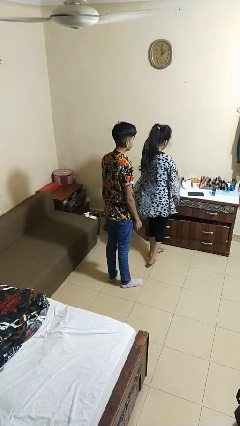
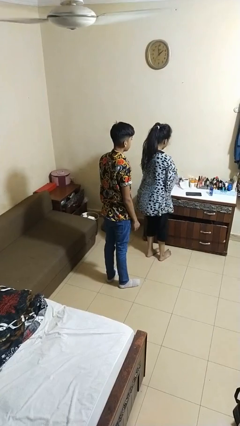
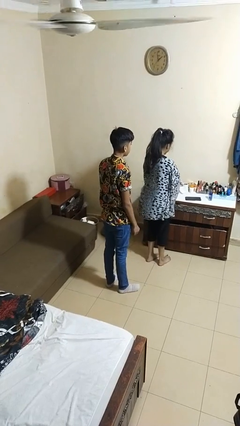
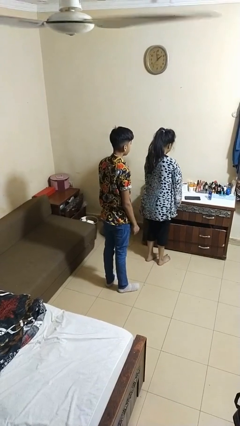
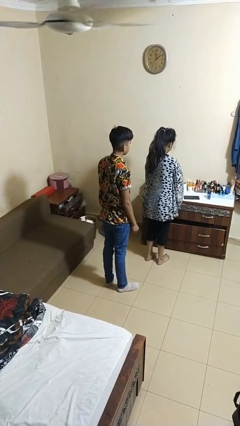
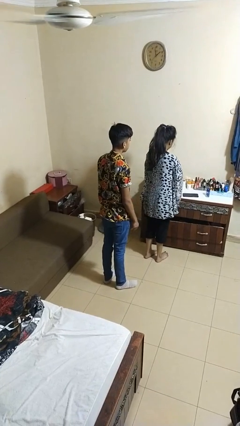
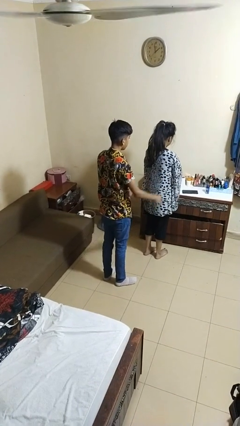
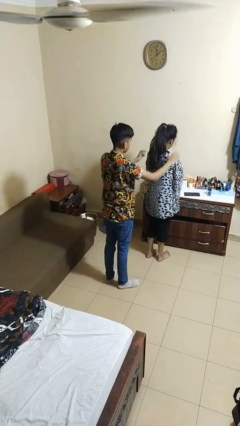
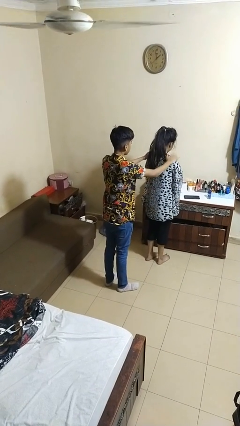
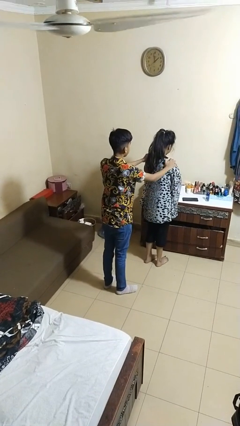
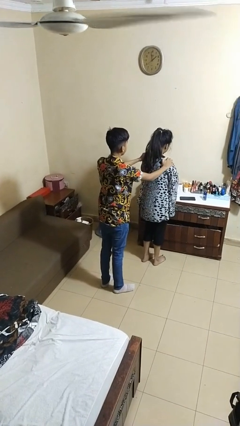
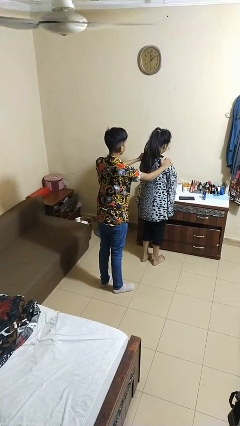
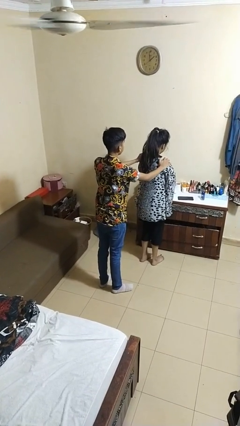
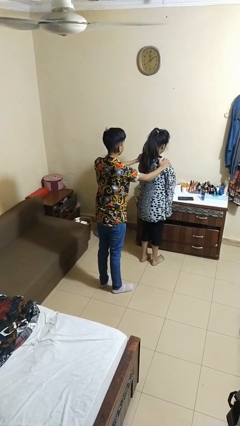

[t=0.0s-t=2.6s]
person grabs person by shoulder

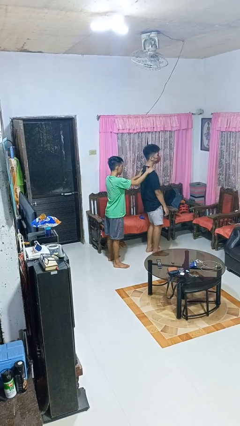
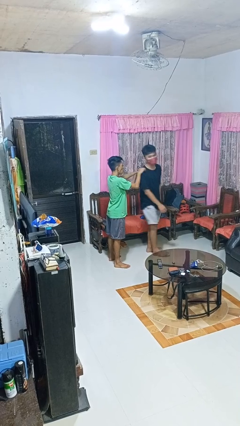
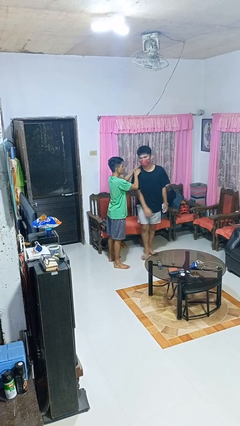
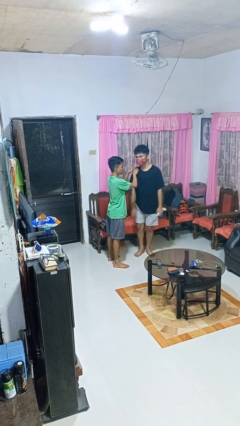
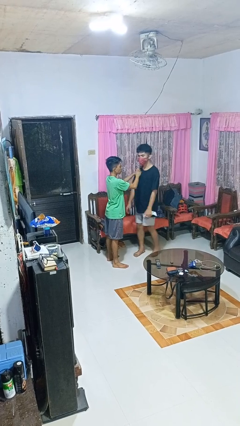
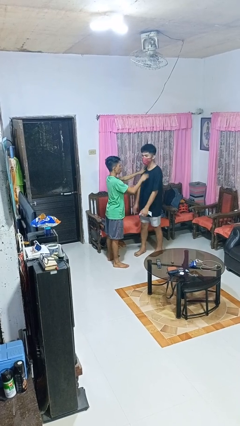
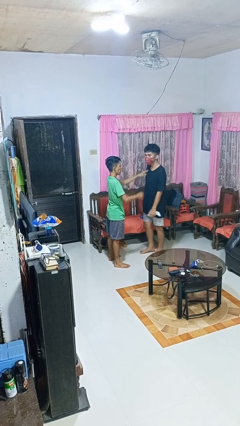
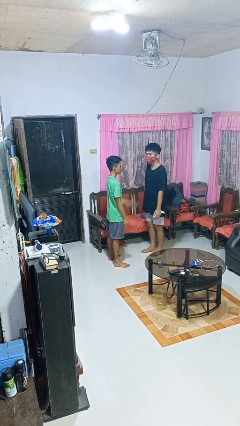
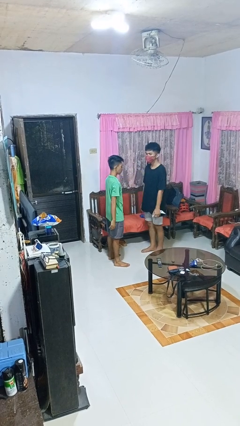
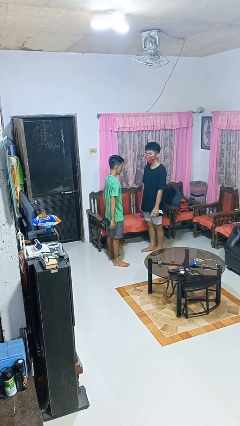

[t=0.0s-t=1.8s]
person spins person around

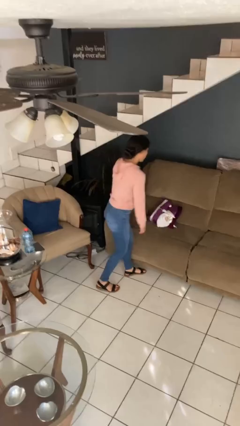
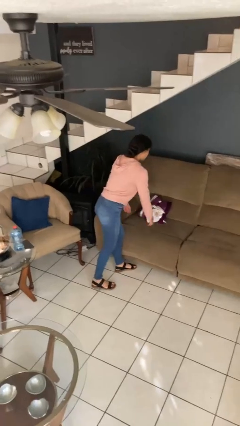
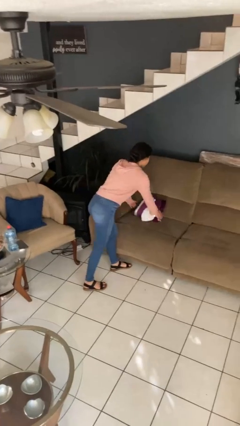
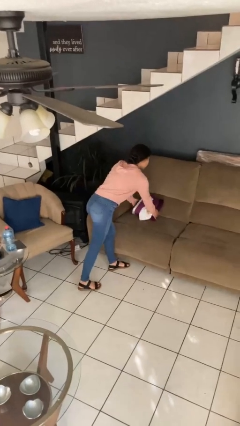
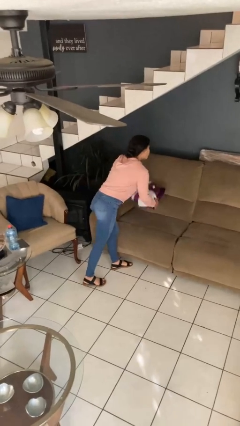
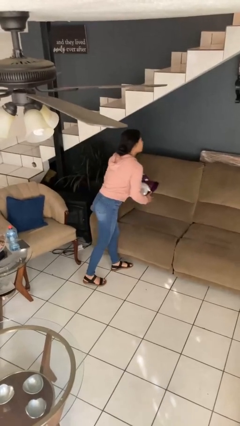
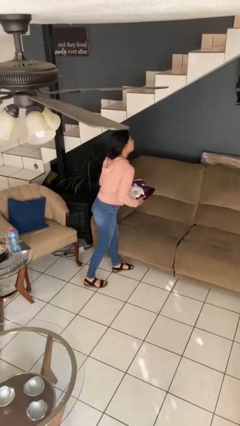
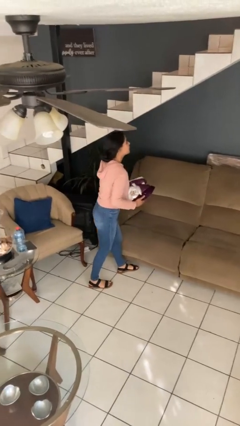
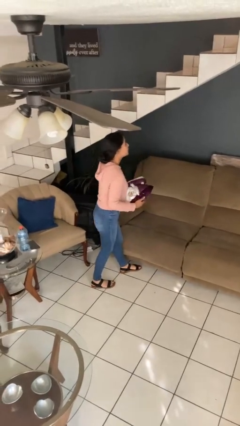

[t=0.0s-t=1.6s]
person picks up object from couch

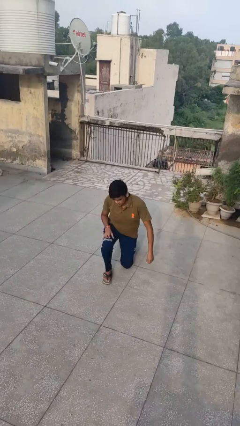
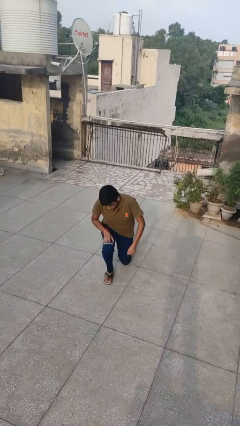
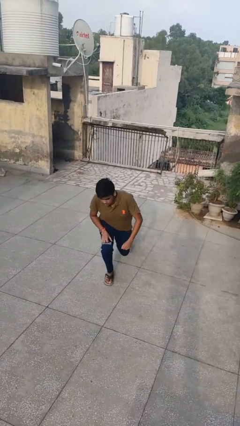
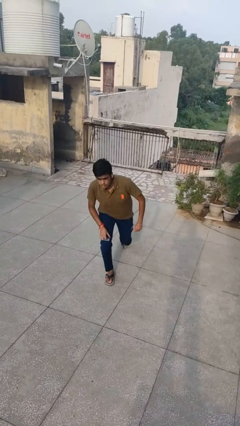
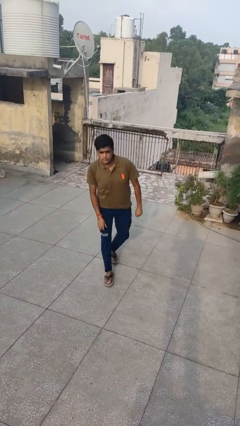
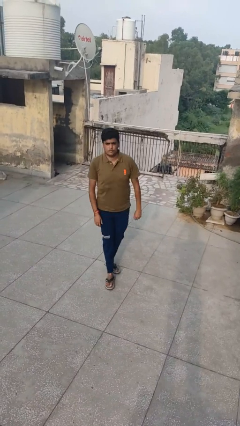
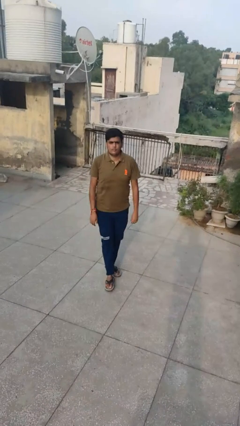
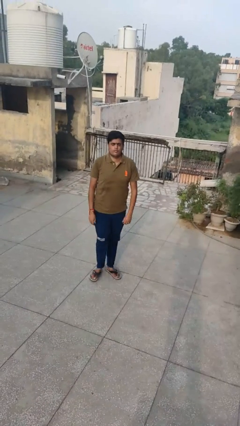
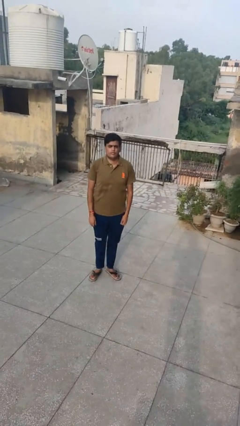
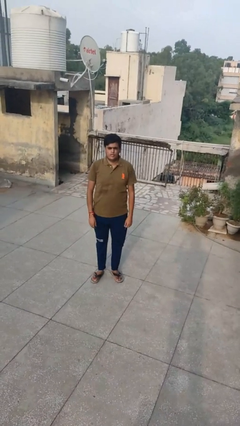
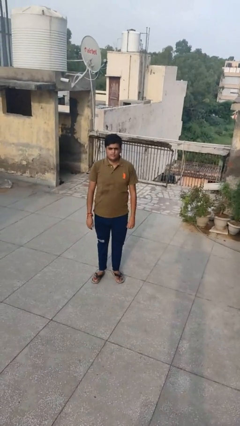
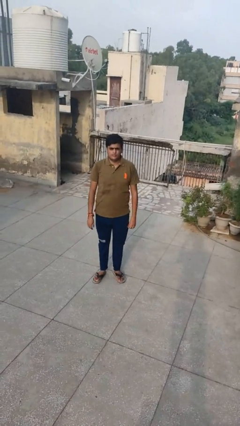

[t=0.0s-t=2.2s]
person stands up from floor

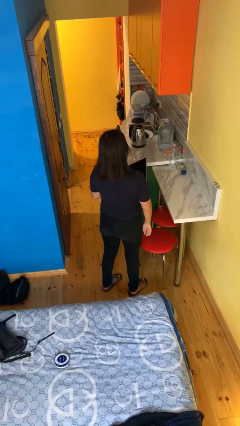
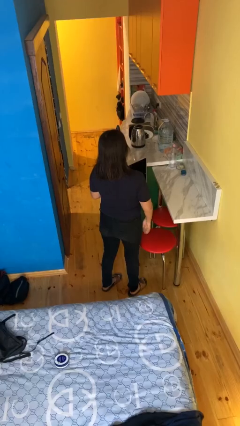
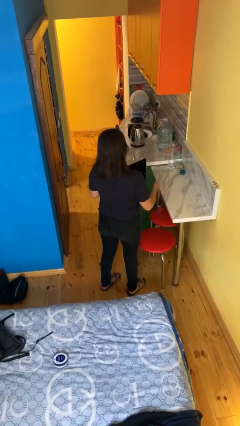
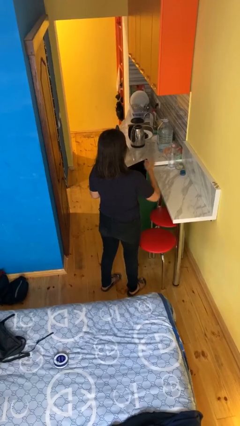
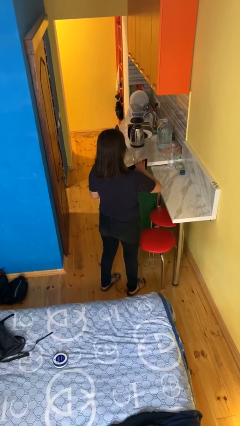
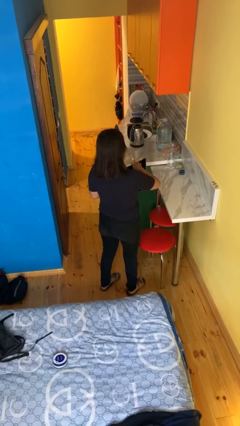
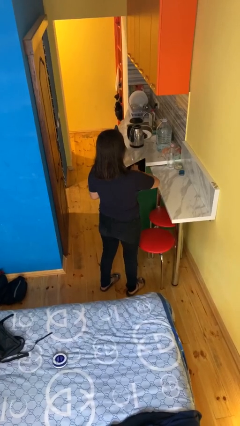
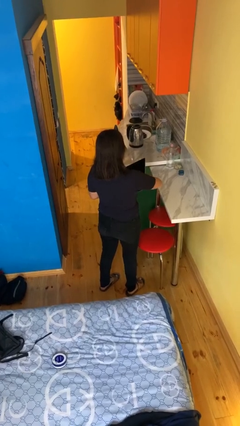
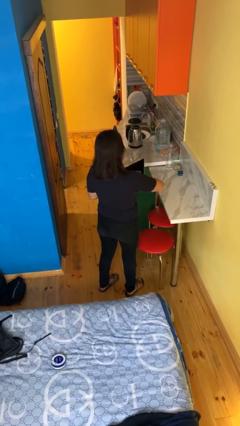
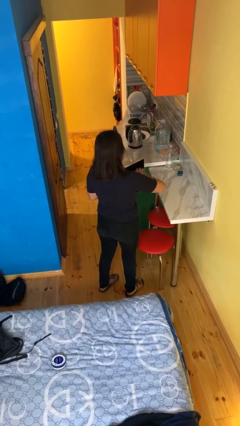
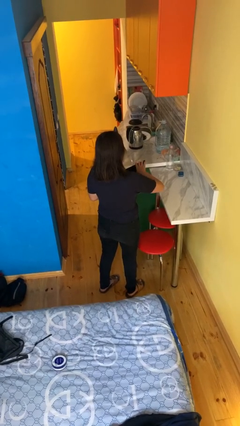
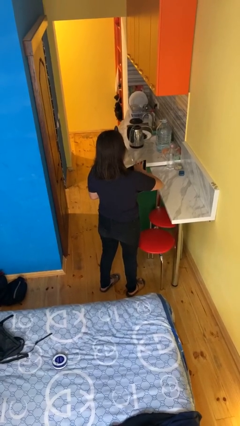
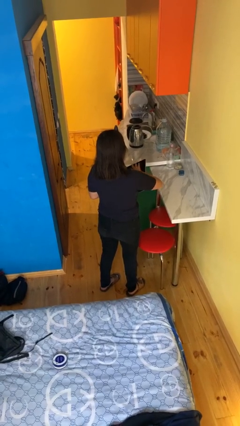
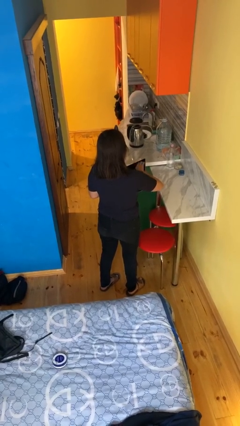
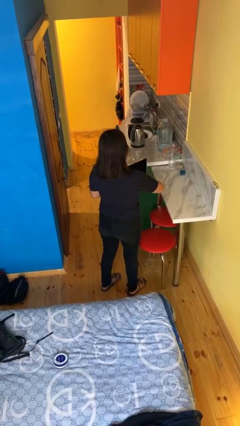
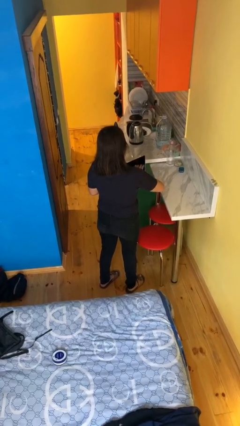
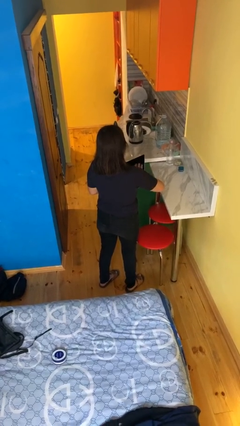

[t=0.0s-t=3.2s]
person interacts with tablet

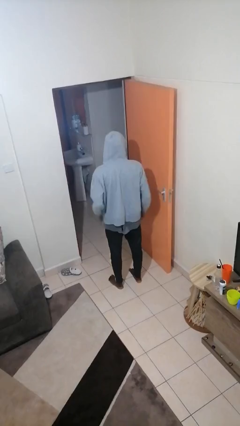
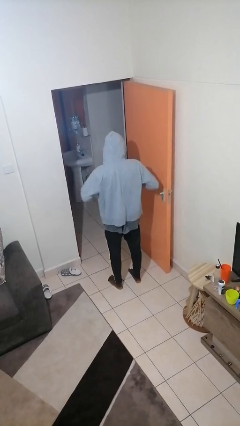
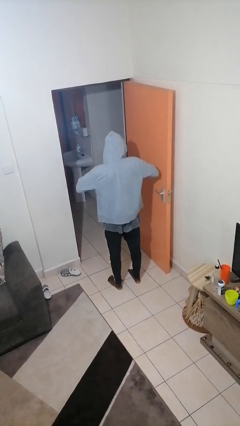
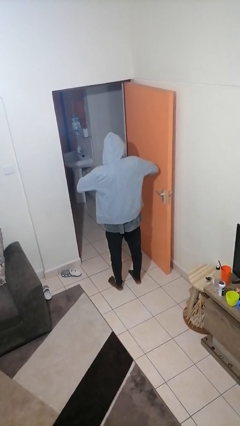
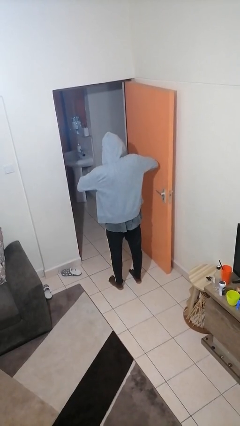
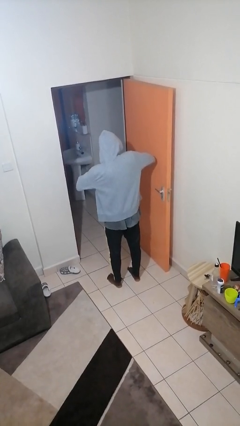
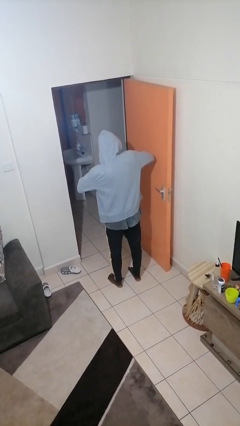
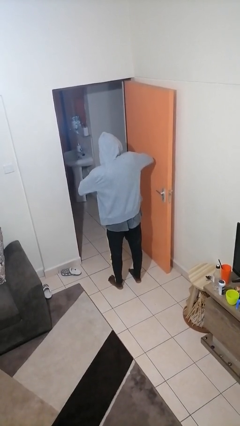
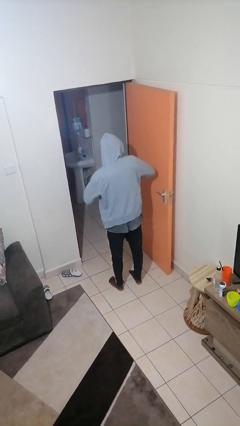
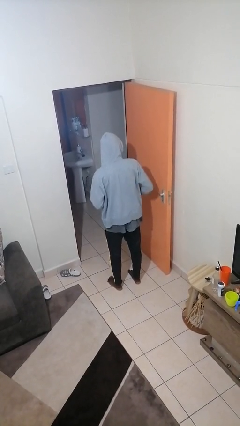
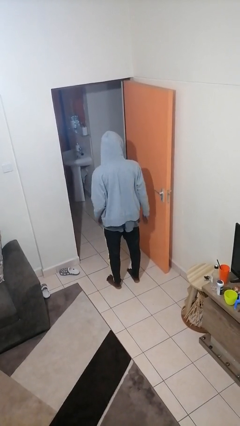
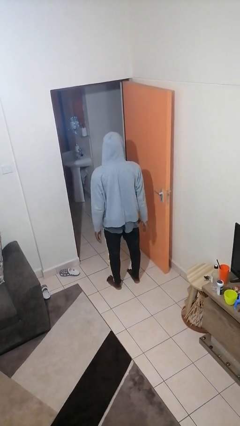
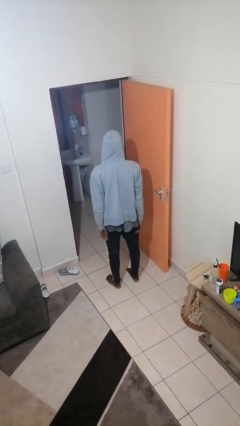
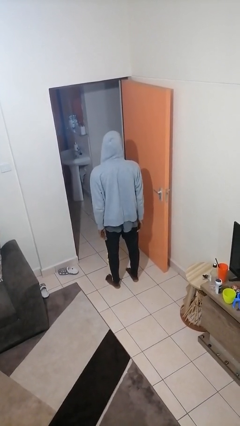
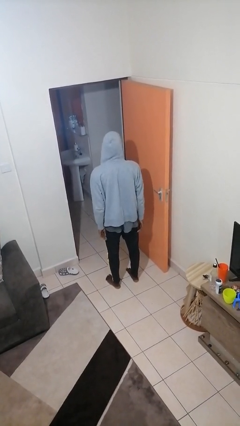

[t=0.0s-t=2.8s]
person puts on ring

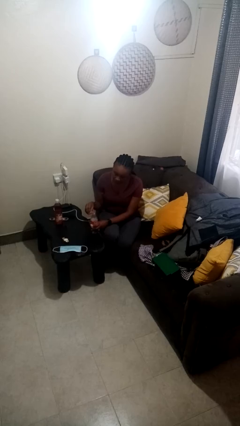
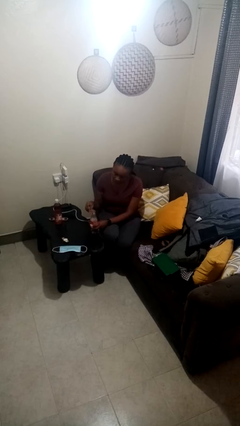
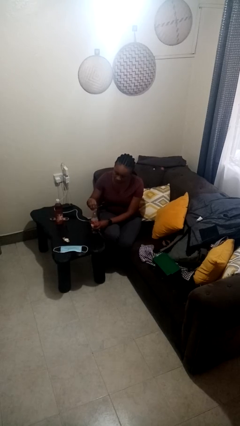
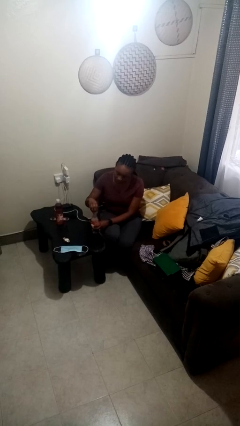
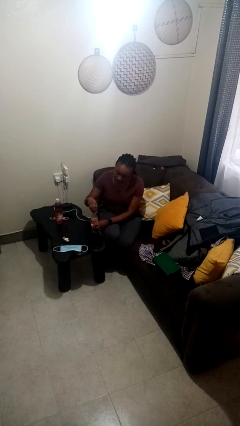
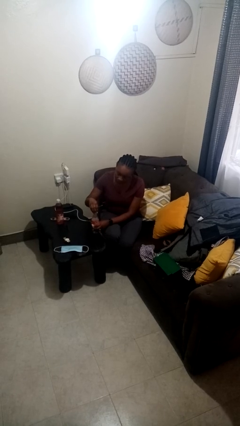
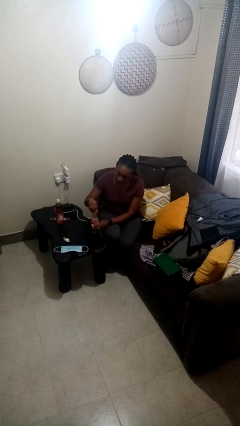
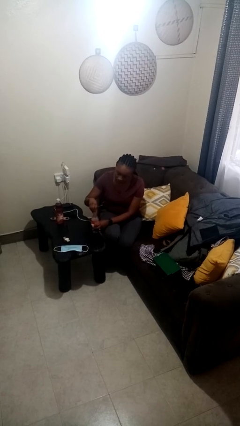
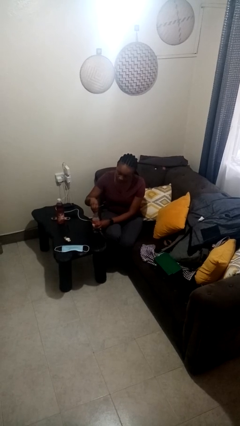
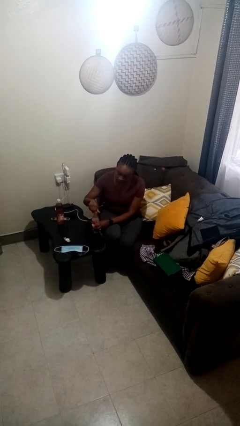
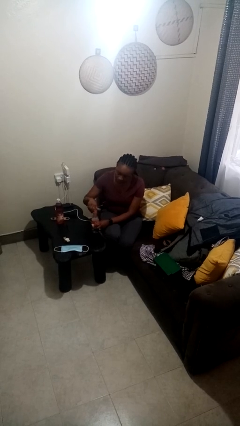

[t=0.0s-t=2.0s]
person screws lid to bottle

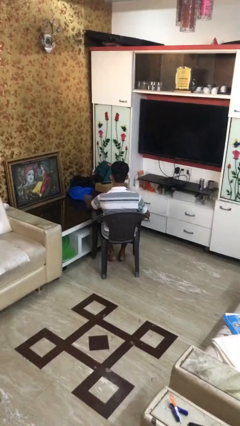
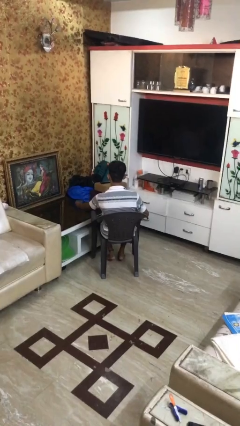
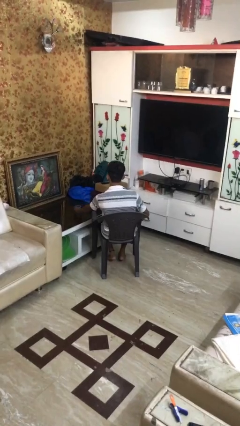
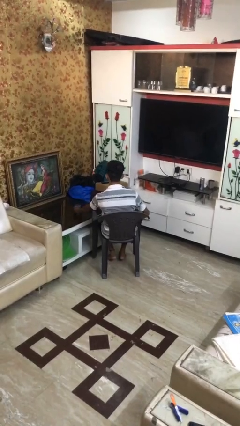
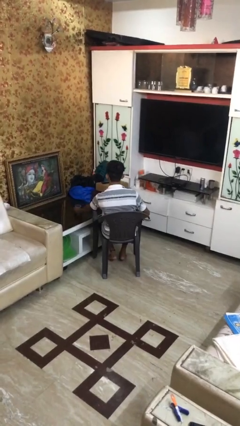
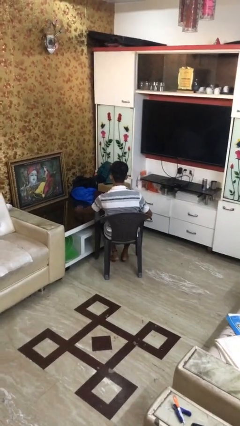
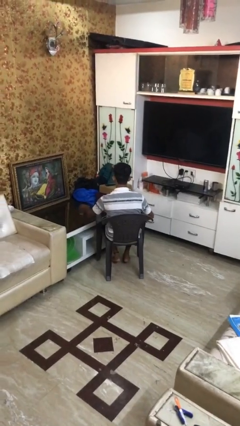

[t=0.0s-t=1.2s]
person sets upright glass
